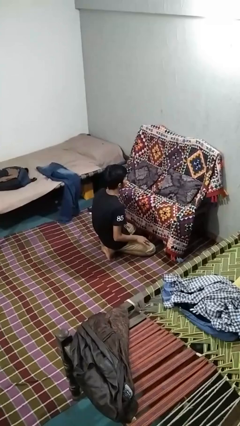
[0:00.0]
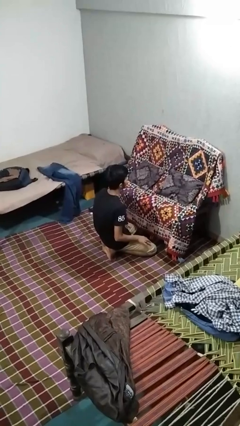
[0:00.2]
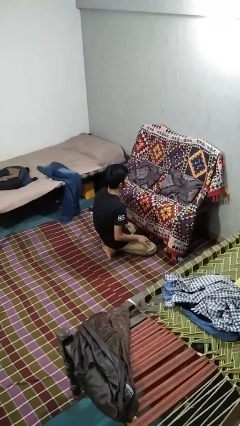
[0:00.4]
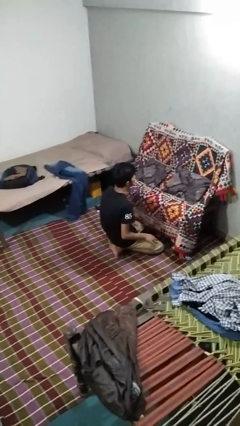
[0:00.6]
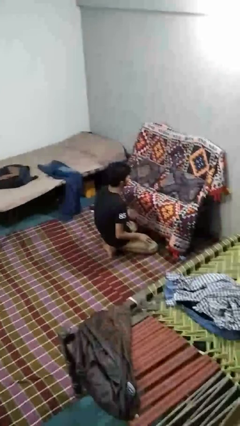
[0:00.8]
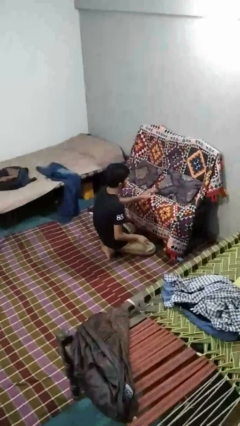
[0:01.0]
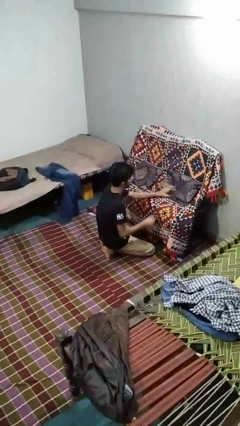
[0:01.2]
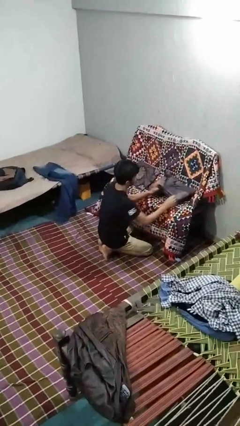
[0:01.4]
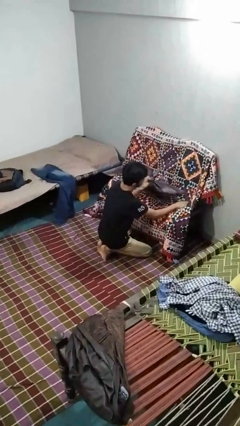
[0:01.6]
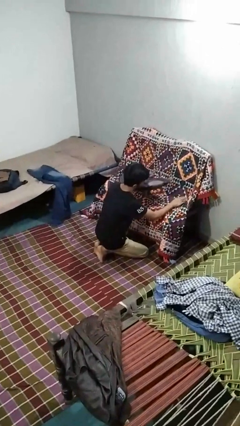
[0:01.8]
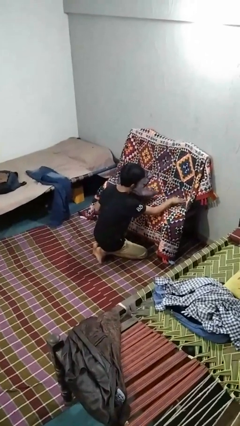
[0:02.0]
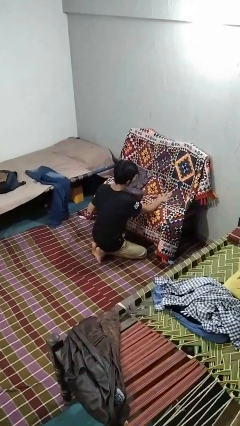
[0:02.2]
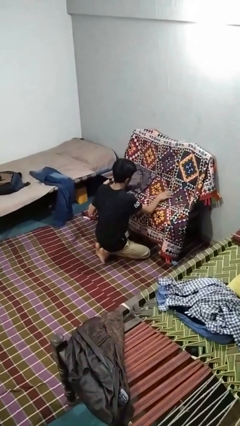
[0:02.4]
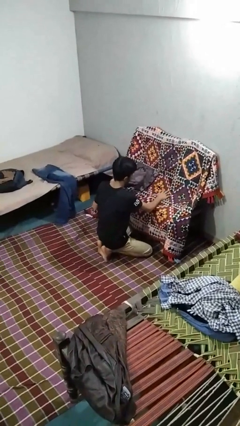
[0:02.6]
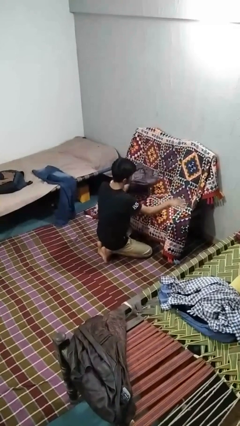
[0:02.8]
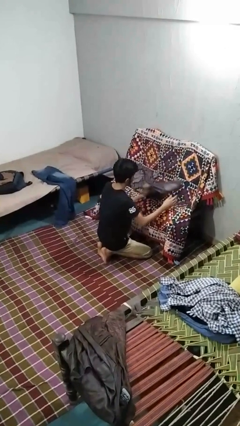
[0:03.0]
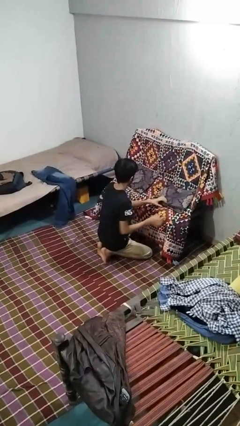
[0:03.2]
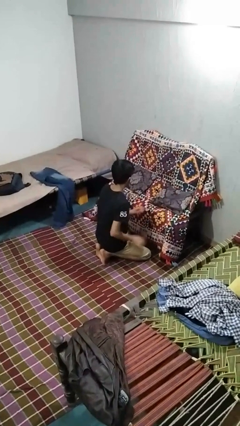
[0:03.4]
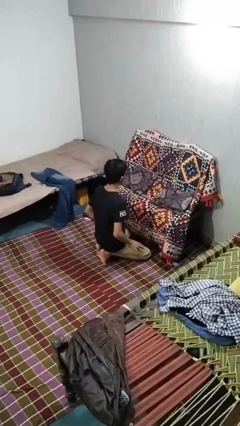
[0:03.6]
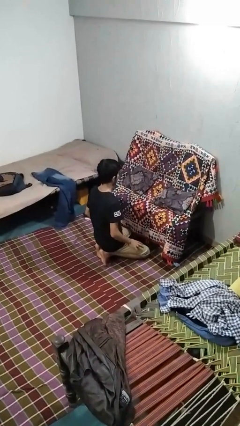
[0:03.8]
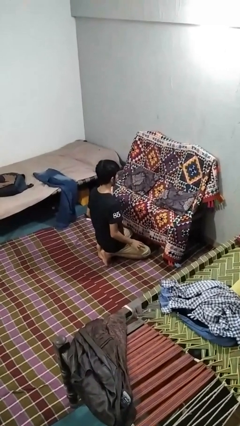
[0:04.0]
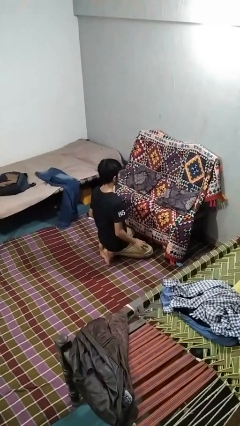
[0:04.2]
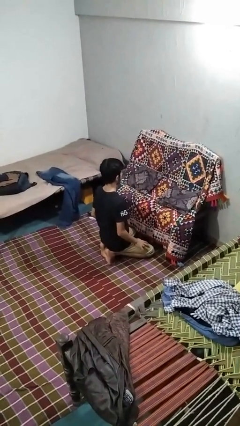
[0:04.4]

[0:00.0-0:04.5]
person searches in couch

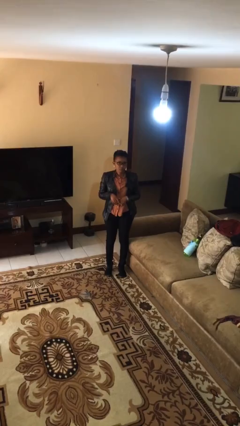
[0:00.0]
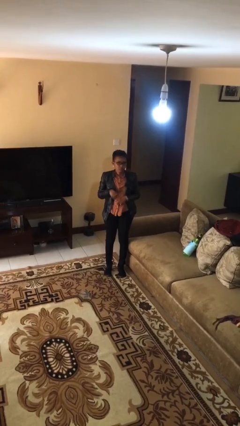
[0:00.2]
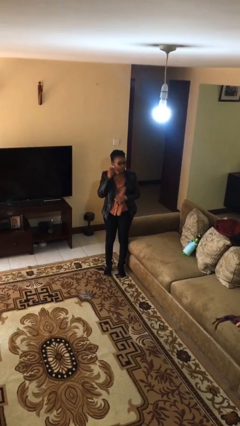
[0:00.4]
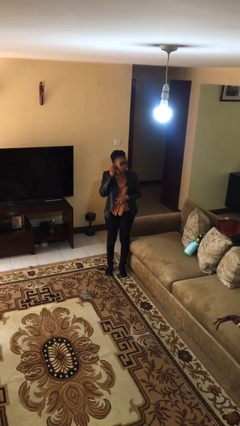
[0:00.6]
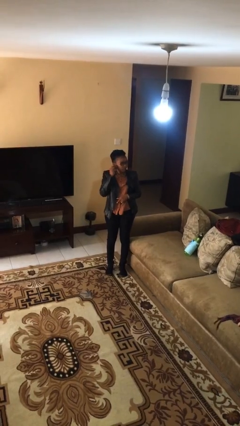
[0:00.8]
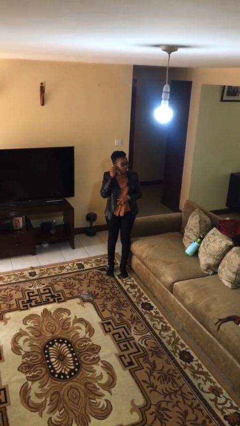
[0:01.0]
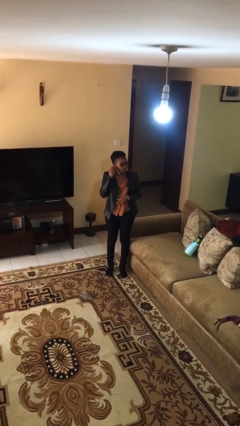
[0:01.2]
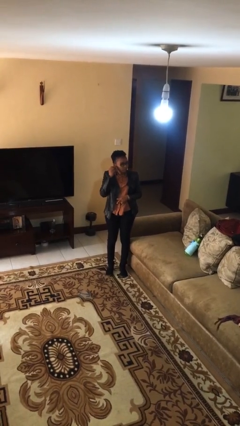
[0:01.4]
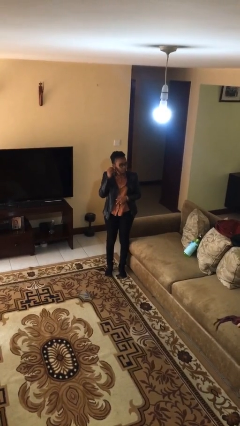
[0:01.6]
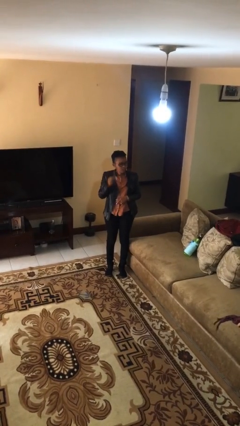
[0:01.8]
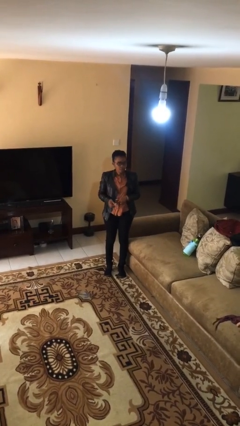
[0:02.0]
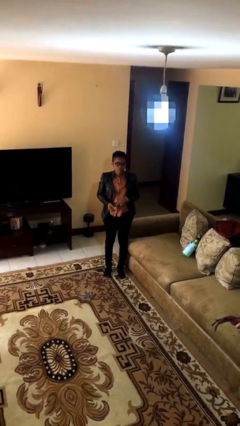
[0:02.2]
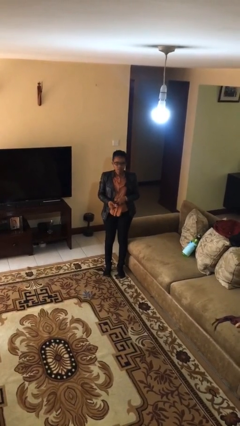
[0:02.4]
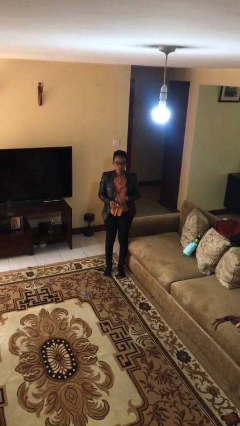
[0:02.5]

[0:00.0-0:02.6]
person takes off earrings

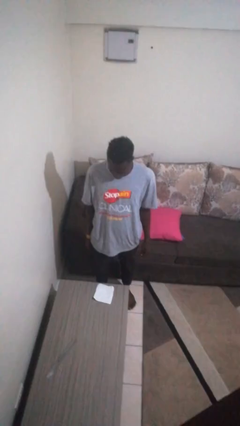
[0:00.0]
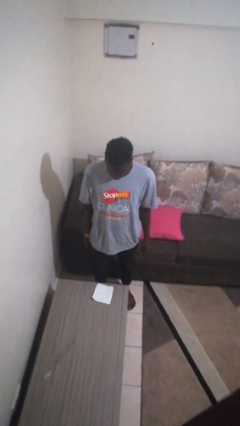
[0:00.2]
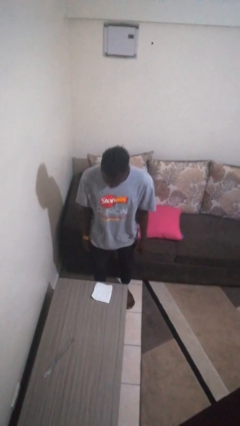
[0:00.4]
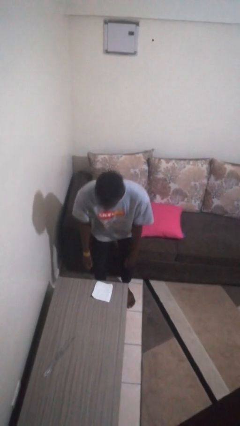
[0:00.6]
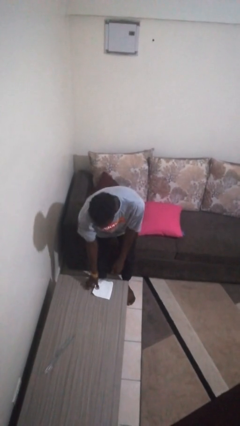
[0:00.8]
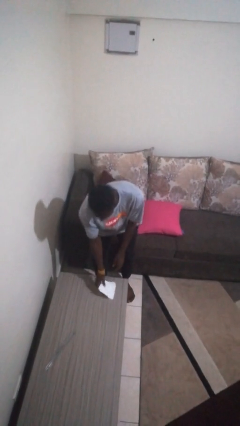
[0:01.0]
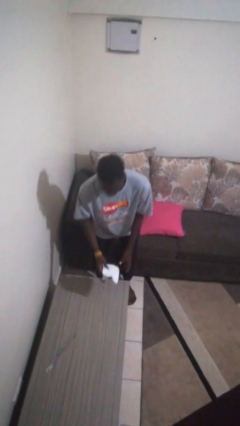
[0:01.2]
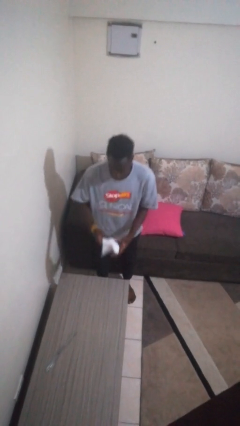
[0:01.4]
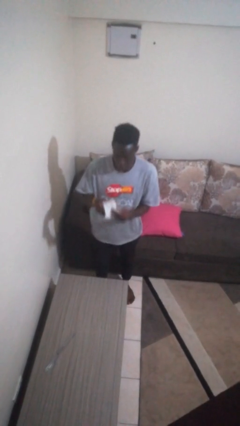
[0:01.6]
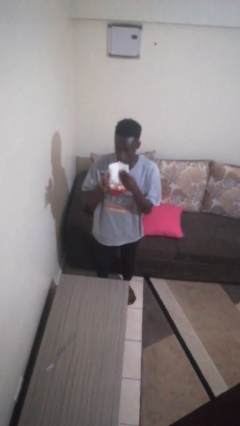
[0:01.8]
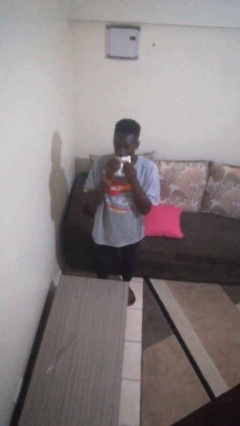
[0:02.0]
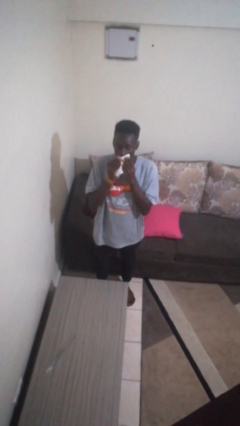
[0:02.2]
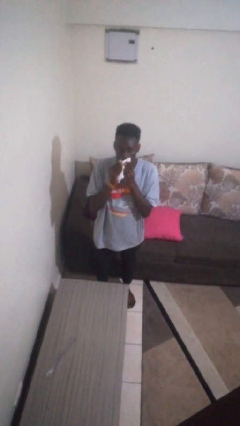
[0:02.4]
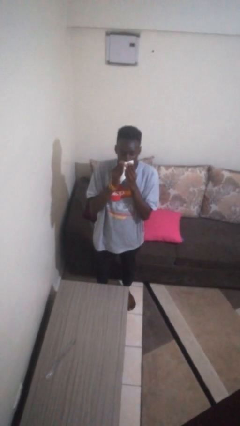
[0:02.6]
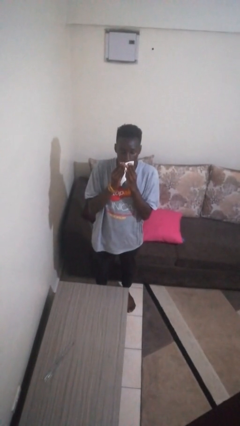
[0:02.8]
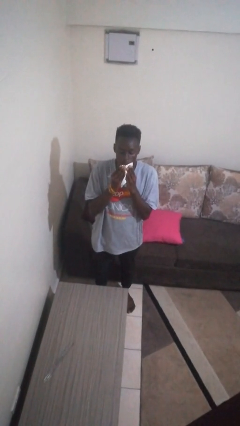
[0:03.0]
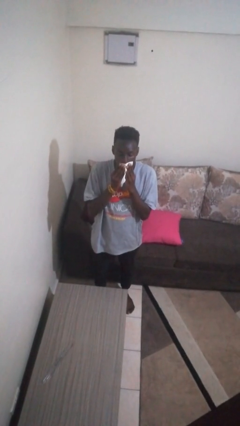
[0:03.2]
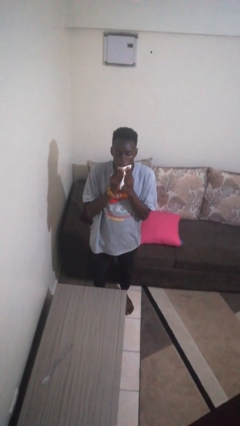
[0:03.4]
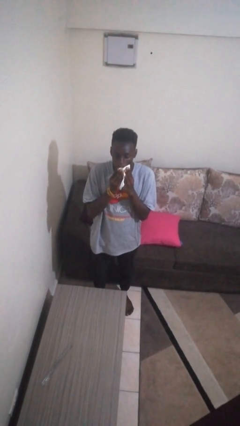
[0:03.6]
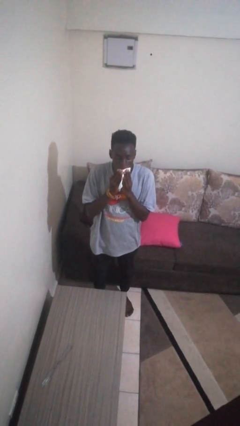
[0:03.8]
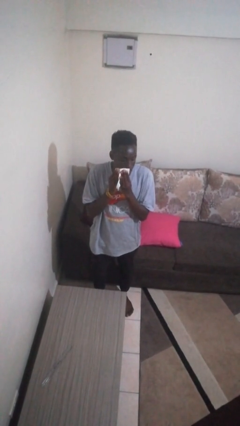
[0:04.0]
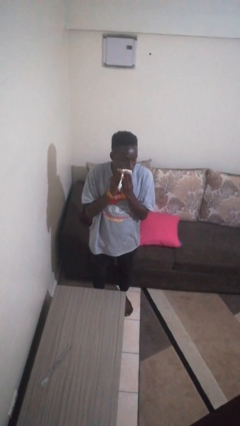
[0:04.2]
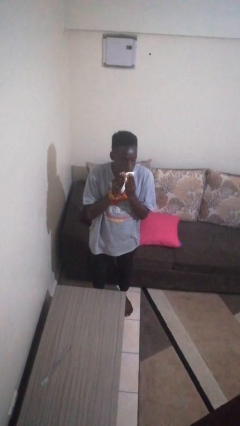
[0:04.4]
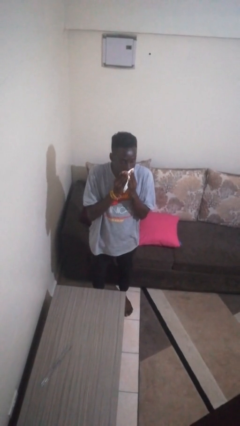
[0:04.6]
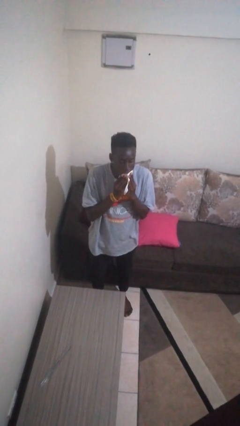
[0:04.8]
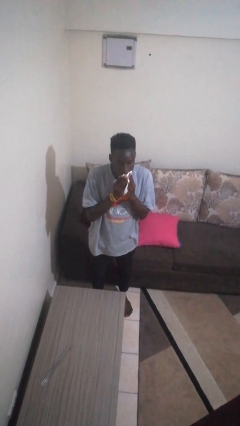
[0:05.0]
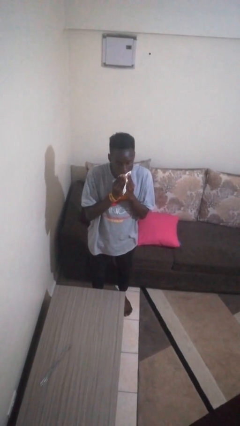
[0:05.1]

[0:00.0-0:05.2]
person wipes mouth with napkin

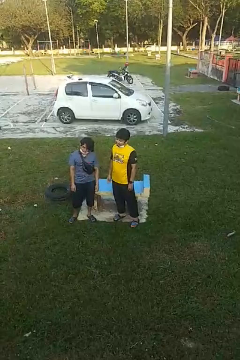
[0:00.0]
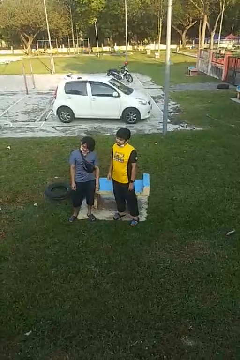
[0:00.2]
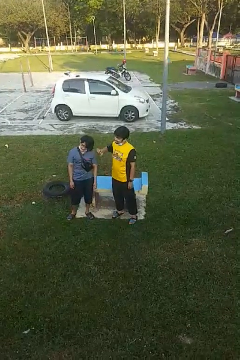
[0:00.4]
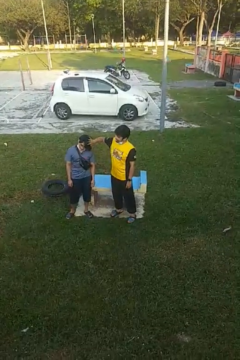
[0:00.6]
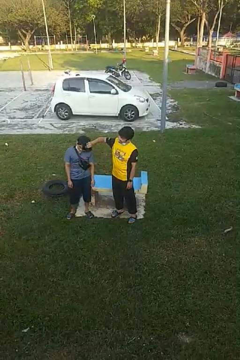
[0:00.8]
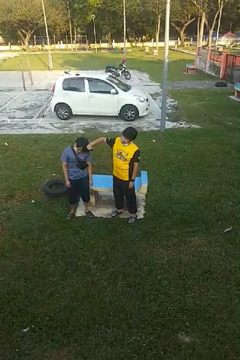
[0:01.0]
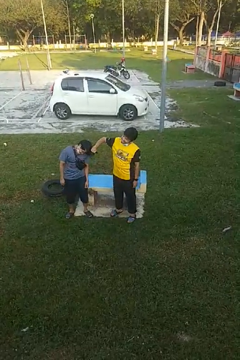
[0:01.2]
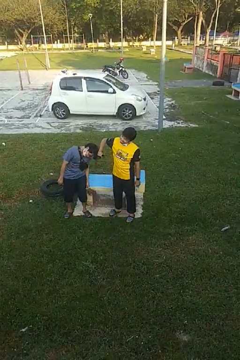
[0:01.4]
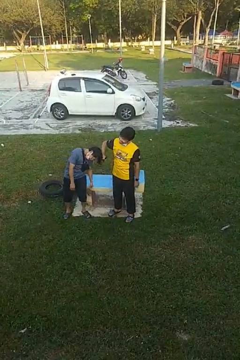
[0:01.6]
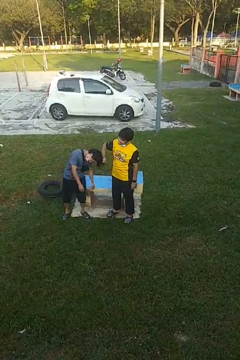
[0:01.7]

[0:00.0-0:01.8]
person grabs person by hair

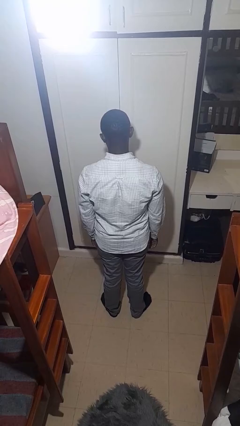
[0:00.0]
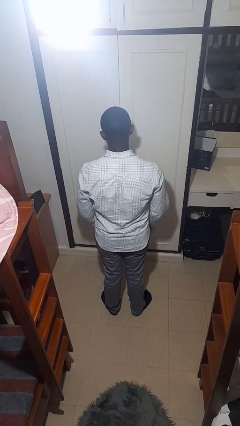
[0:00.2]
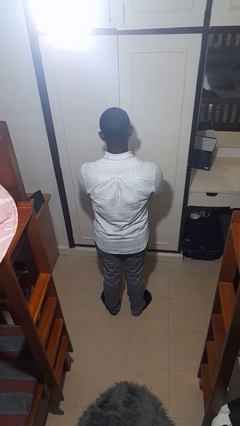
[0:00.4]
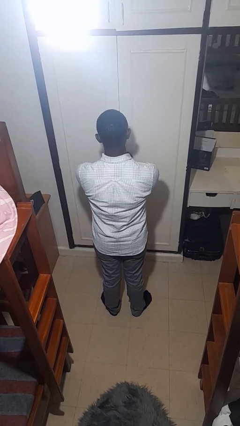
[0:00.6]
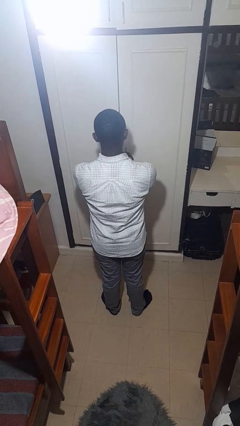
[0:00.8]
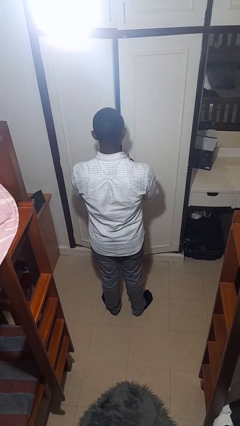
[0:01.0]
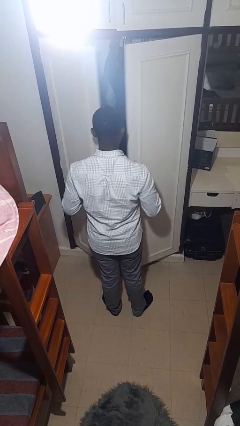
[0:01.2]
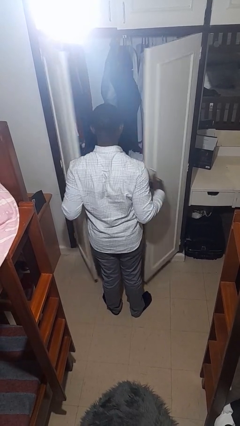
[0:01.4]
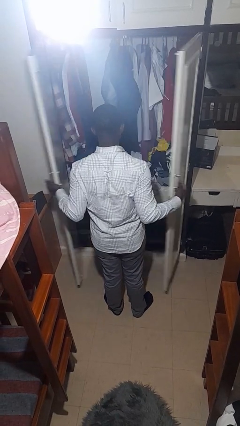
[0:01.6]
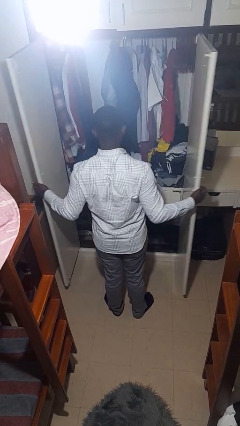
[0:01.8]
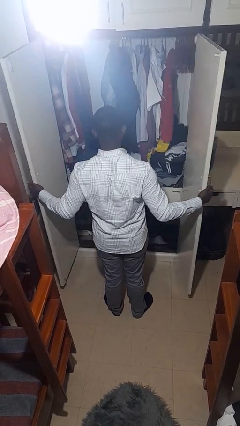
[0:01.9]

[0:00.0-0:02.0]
person opens closet door

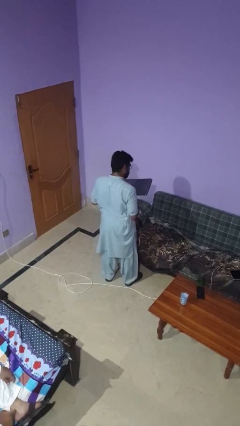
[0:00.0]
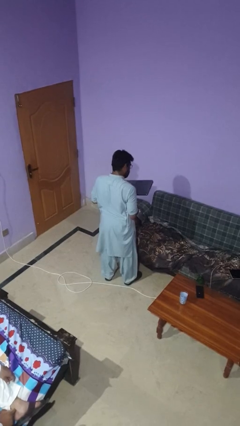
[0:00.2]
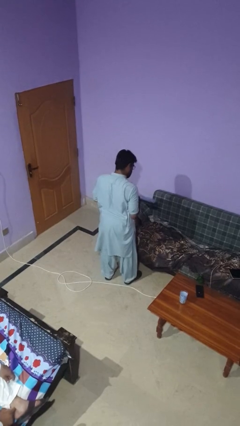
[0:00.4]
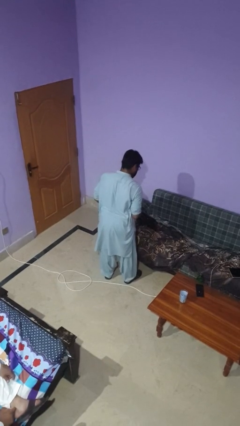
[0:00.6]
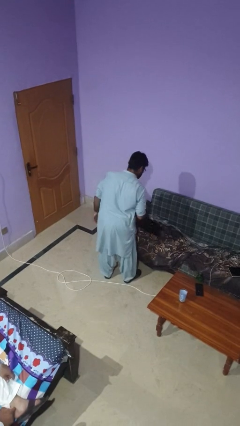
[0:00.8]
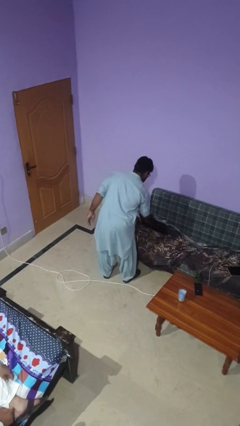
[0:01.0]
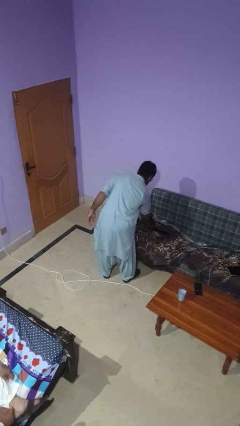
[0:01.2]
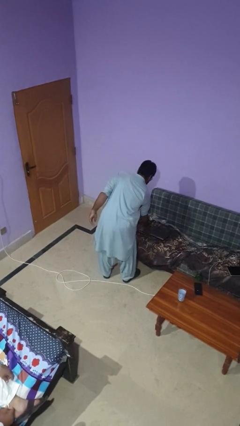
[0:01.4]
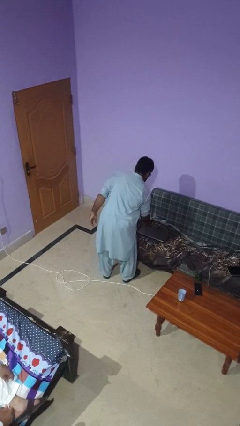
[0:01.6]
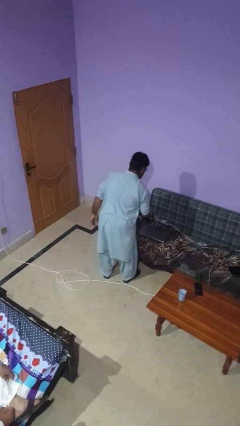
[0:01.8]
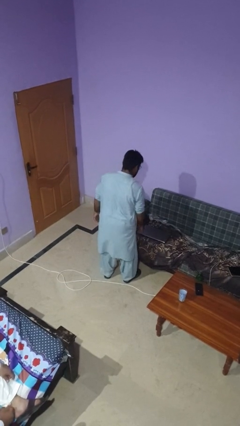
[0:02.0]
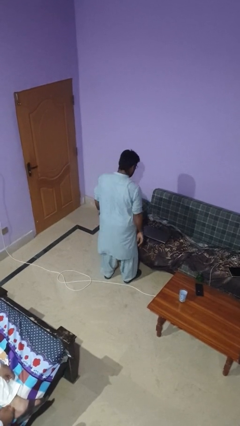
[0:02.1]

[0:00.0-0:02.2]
person puts down object on couch
